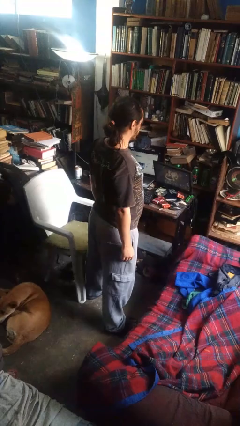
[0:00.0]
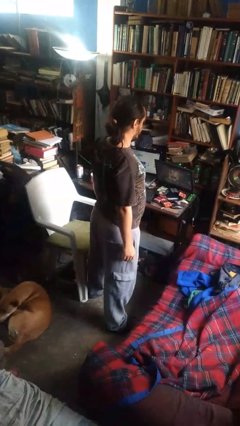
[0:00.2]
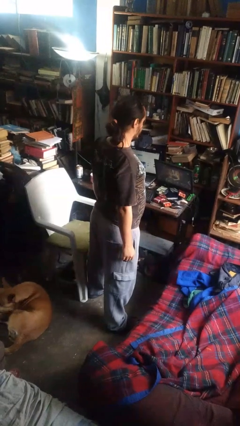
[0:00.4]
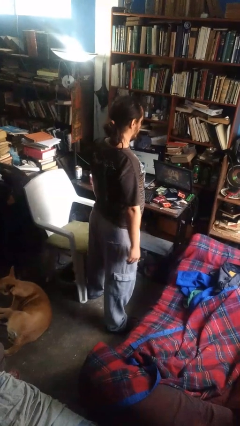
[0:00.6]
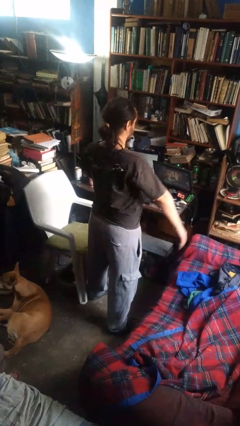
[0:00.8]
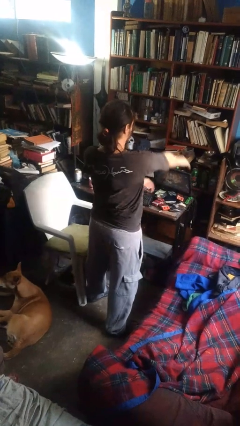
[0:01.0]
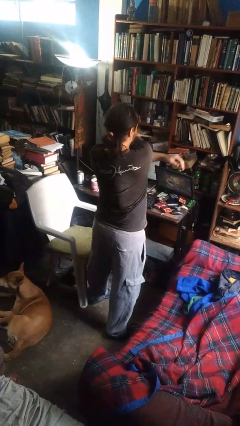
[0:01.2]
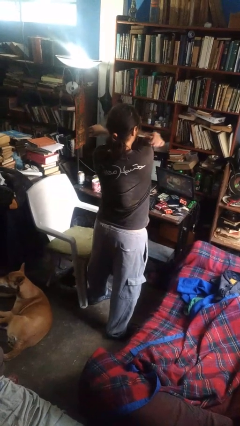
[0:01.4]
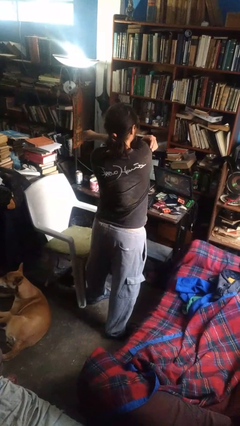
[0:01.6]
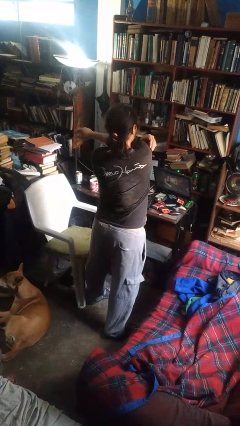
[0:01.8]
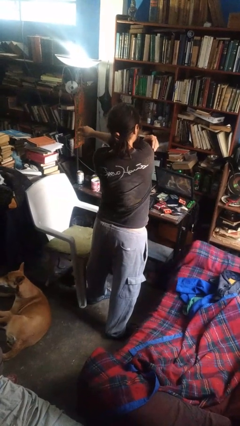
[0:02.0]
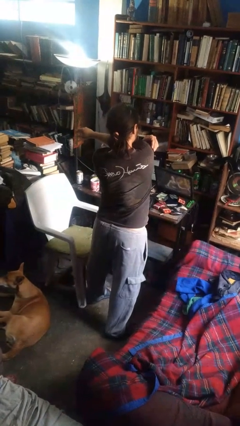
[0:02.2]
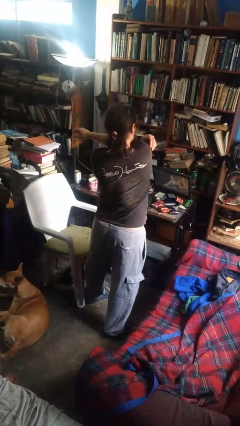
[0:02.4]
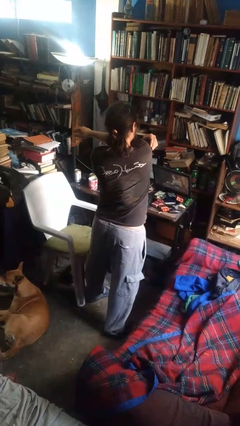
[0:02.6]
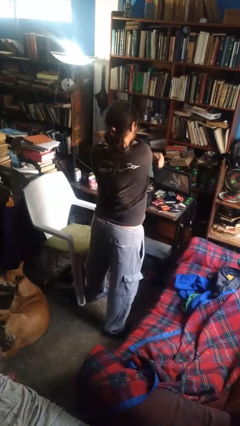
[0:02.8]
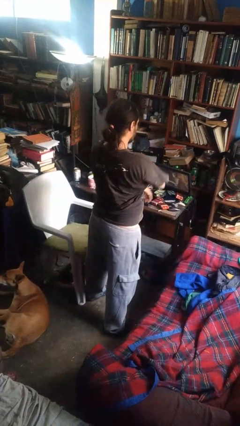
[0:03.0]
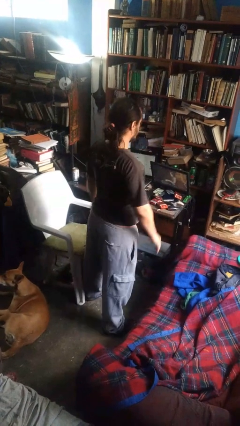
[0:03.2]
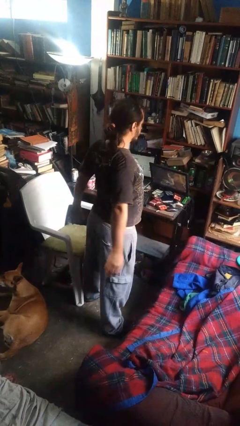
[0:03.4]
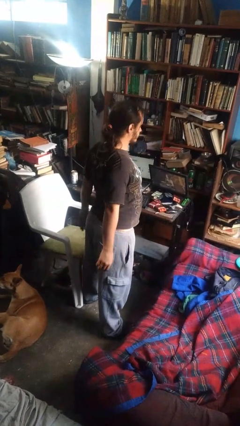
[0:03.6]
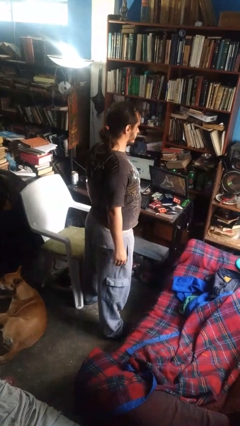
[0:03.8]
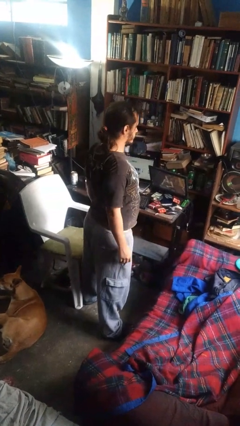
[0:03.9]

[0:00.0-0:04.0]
person stretches arms to side

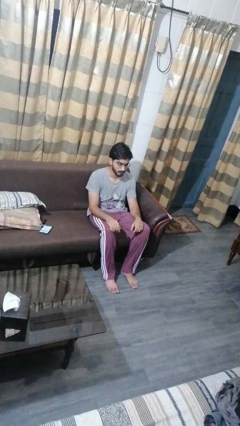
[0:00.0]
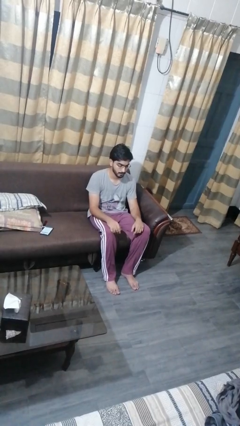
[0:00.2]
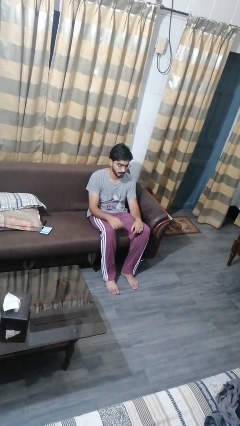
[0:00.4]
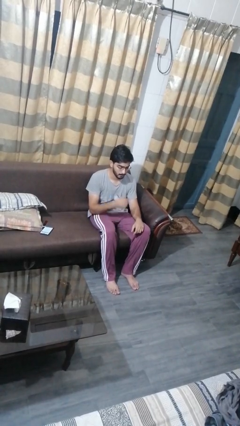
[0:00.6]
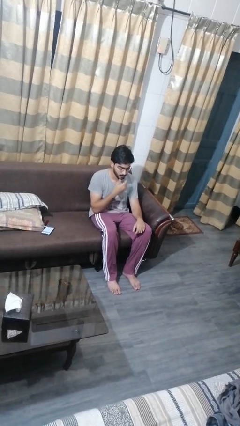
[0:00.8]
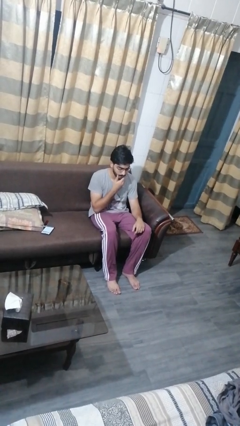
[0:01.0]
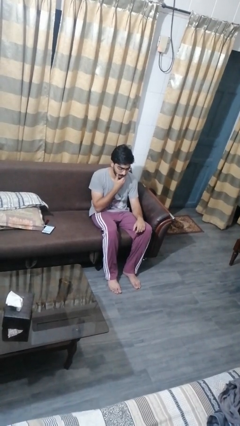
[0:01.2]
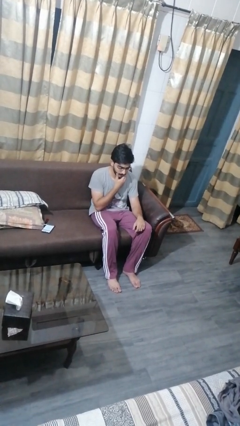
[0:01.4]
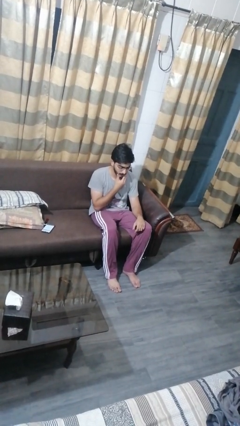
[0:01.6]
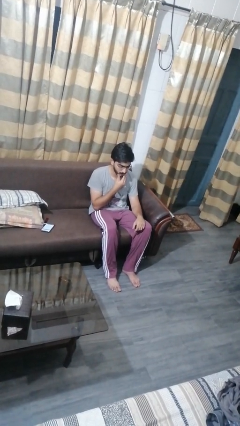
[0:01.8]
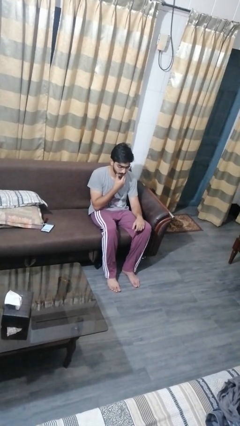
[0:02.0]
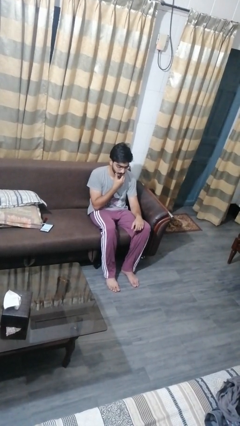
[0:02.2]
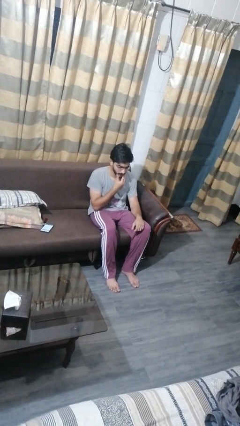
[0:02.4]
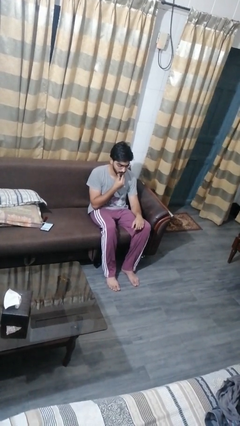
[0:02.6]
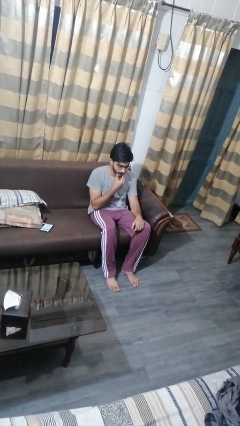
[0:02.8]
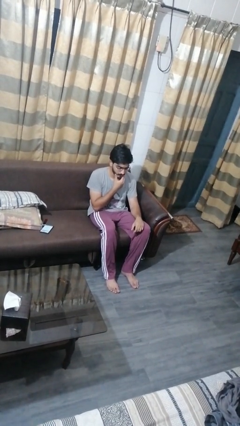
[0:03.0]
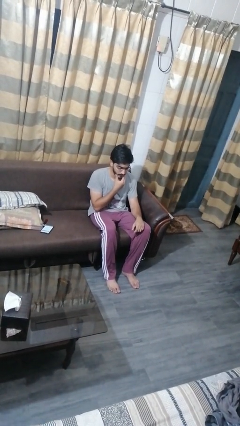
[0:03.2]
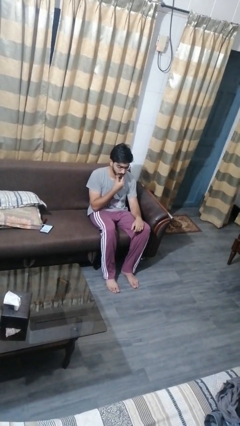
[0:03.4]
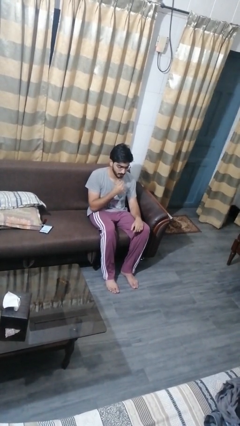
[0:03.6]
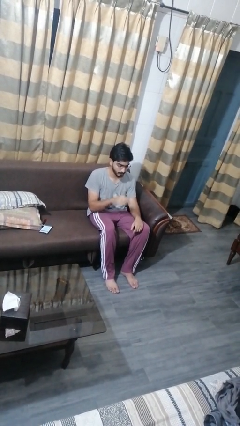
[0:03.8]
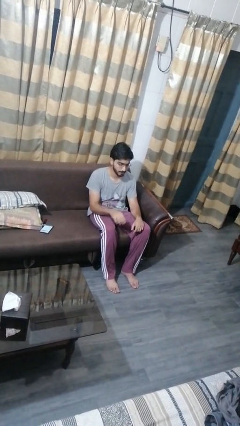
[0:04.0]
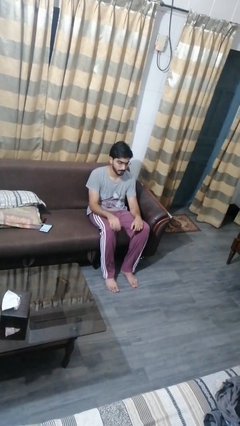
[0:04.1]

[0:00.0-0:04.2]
person strokes chin

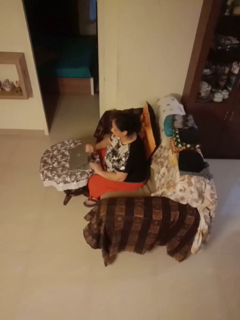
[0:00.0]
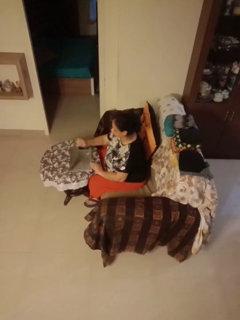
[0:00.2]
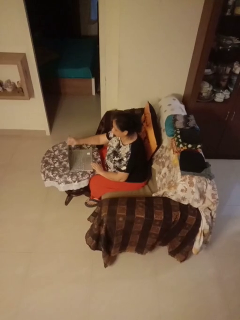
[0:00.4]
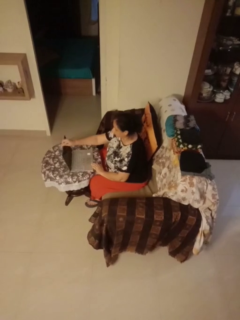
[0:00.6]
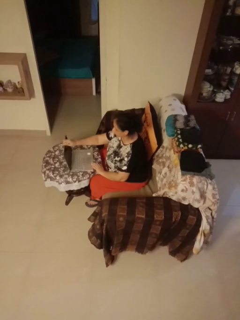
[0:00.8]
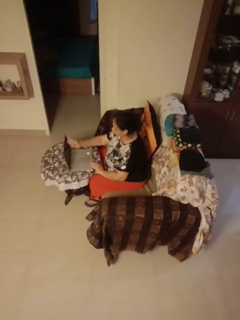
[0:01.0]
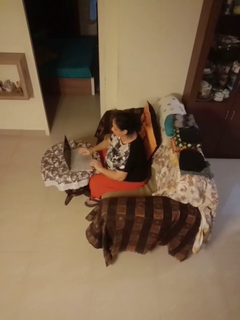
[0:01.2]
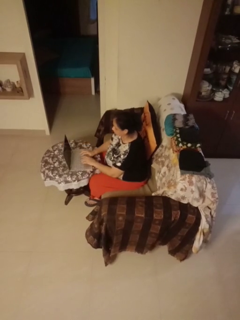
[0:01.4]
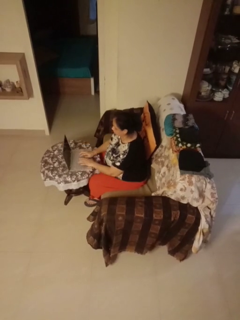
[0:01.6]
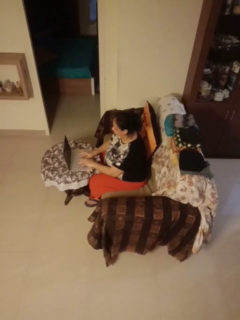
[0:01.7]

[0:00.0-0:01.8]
person opens laptop

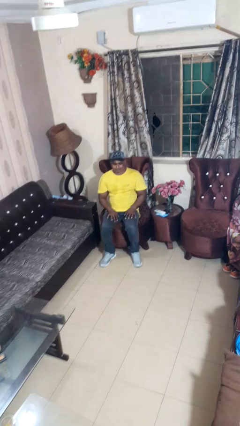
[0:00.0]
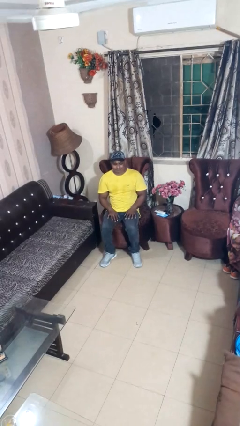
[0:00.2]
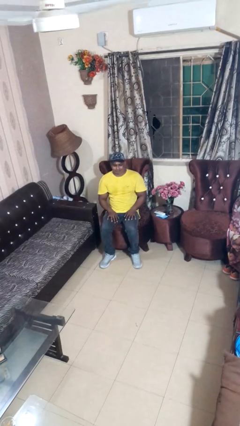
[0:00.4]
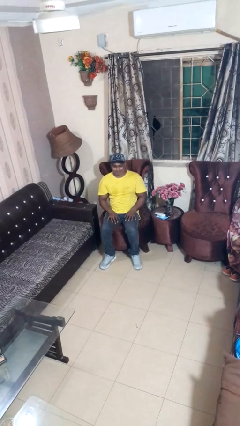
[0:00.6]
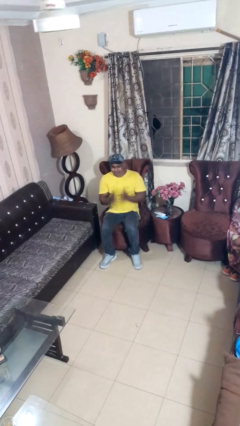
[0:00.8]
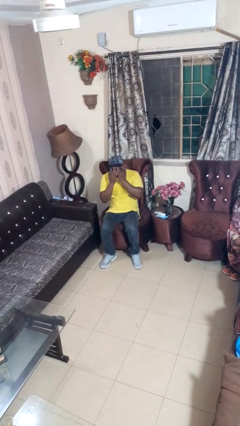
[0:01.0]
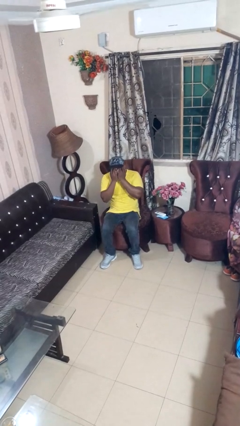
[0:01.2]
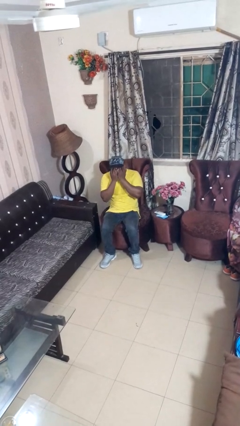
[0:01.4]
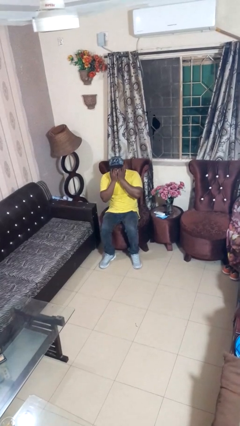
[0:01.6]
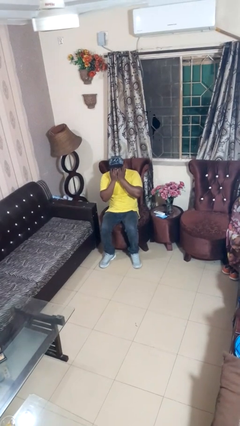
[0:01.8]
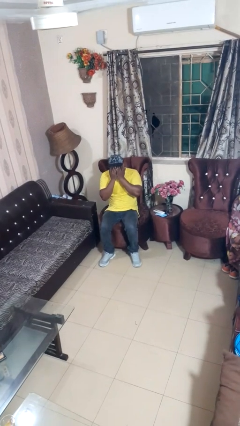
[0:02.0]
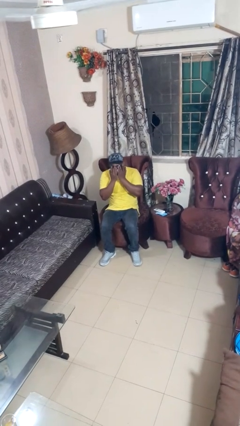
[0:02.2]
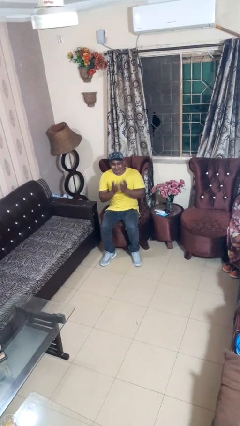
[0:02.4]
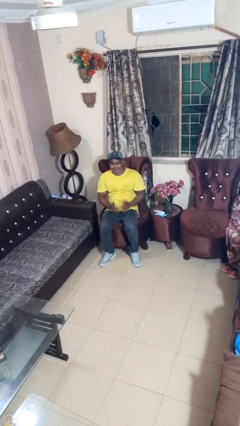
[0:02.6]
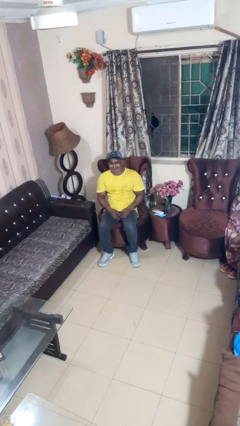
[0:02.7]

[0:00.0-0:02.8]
person covers face with hands

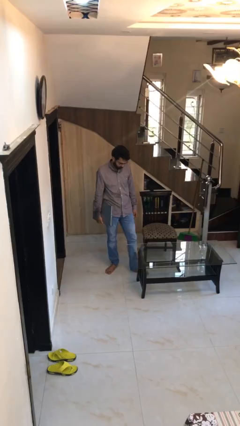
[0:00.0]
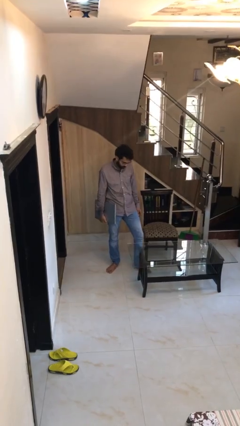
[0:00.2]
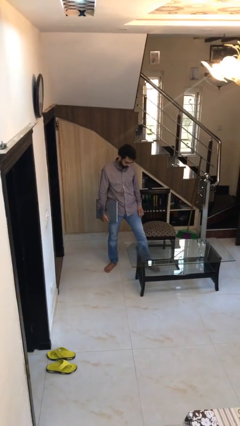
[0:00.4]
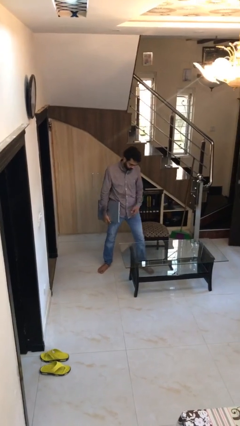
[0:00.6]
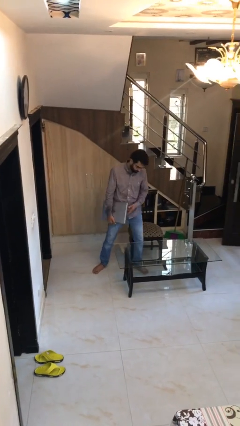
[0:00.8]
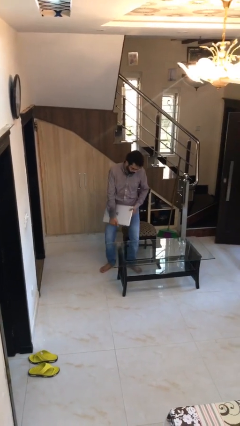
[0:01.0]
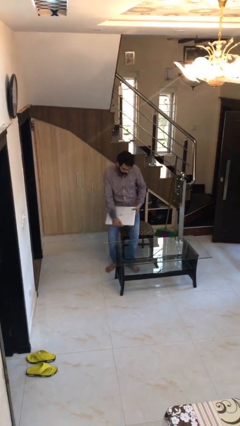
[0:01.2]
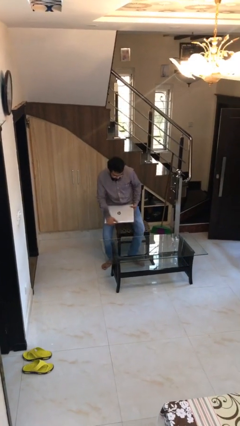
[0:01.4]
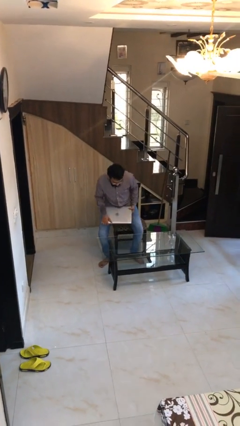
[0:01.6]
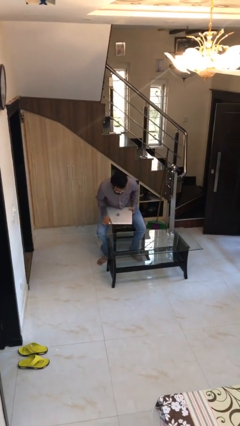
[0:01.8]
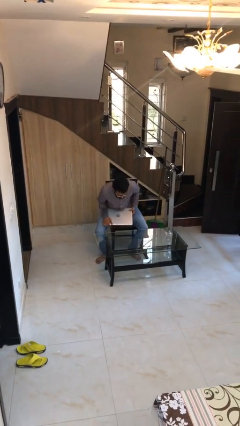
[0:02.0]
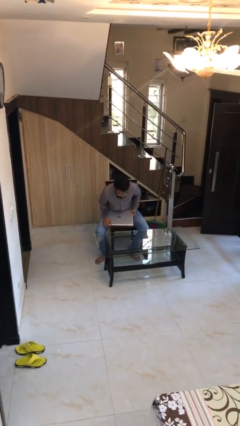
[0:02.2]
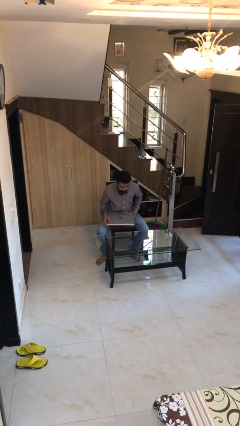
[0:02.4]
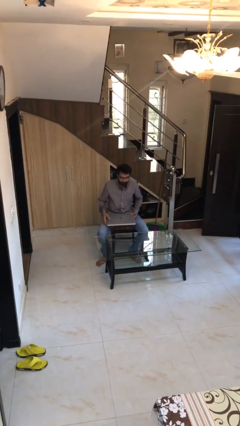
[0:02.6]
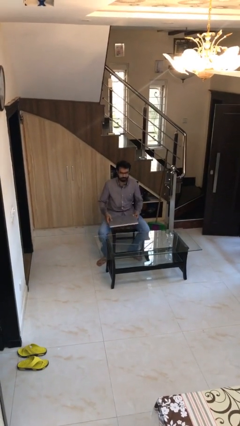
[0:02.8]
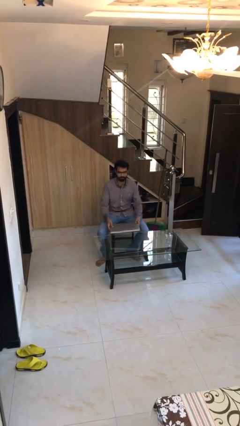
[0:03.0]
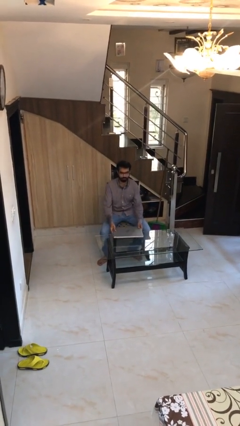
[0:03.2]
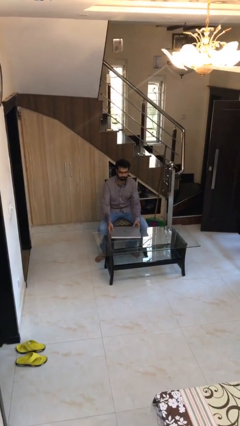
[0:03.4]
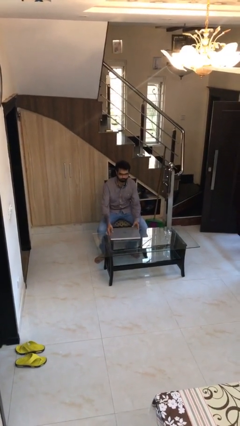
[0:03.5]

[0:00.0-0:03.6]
person sits down

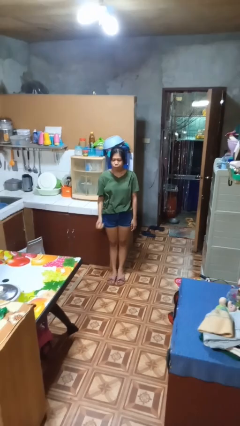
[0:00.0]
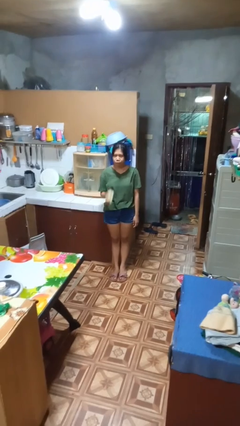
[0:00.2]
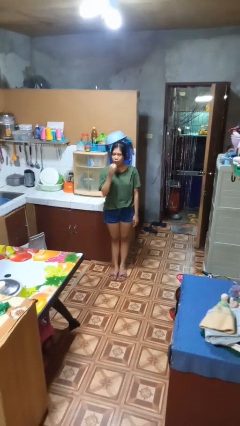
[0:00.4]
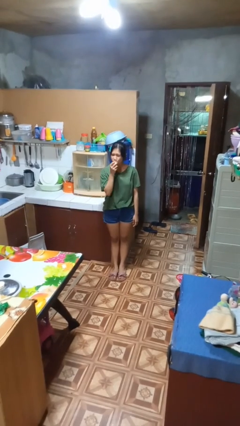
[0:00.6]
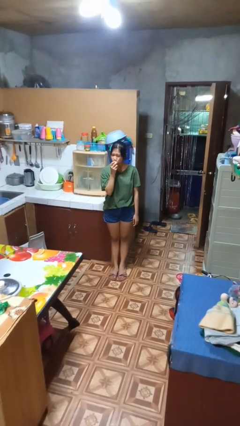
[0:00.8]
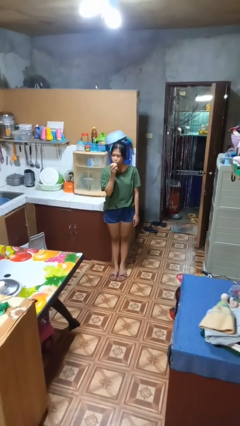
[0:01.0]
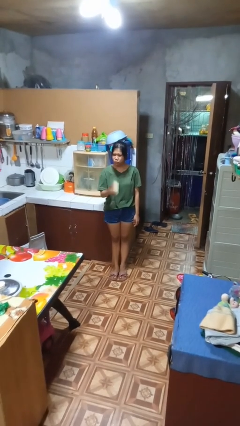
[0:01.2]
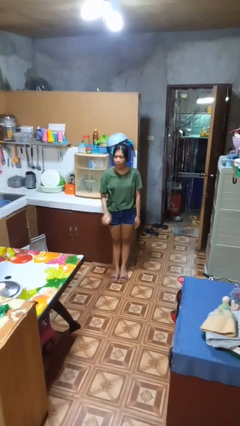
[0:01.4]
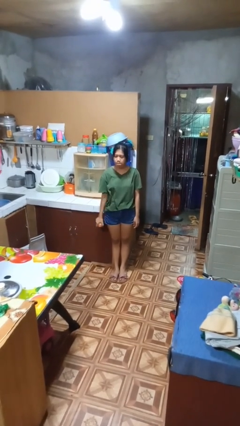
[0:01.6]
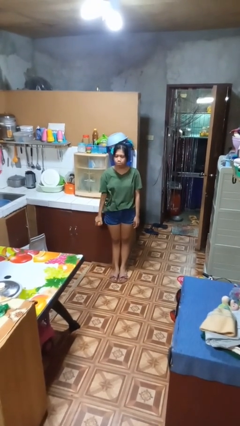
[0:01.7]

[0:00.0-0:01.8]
person eats apple
